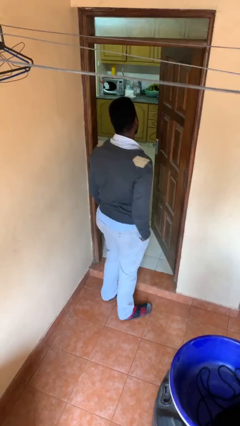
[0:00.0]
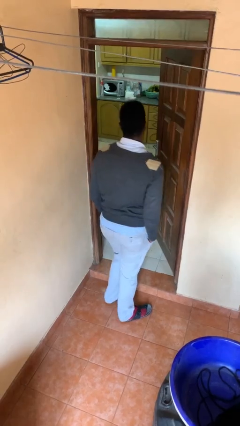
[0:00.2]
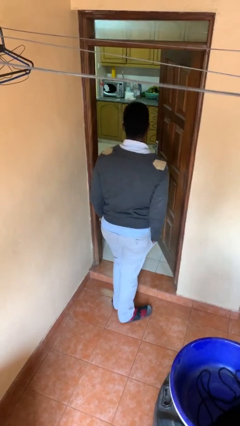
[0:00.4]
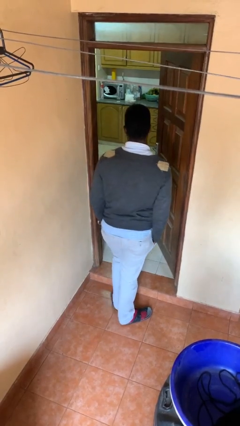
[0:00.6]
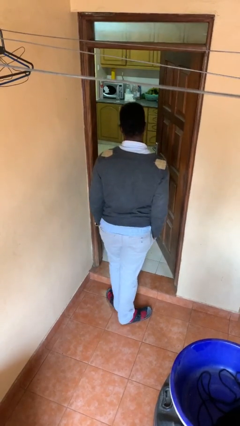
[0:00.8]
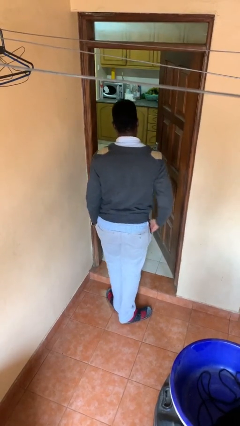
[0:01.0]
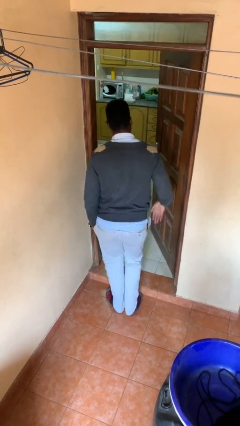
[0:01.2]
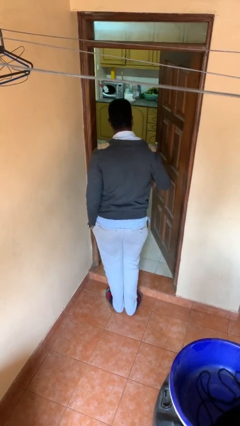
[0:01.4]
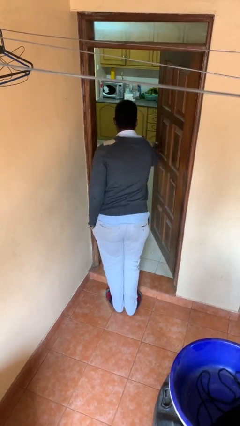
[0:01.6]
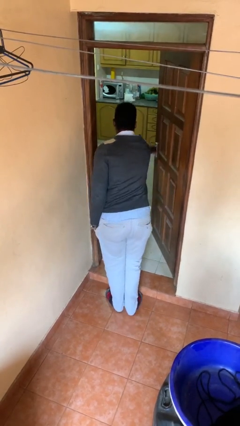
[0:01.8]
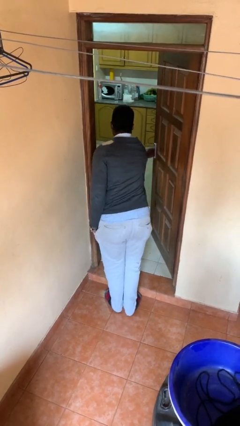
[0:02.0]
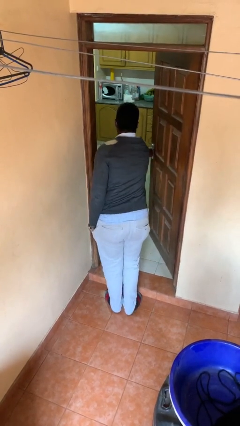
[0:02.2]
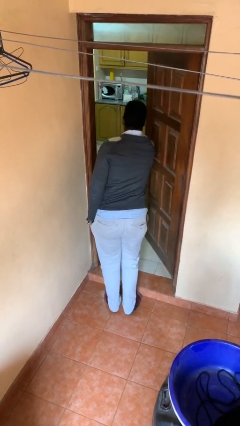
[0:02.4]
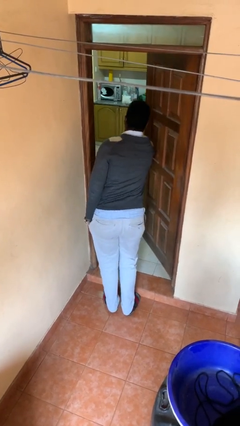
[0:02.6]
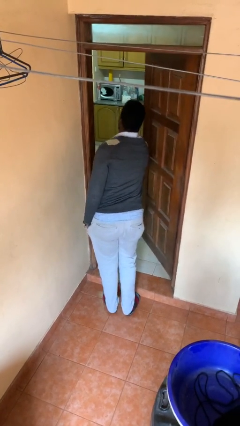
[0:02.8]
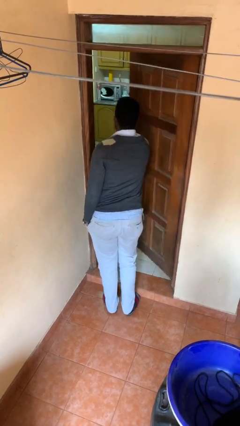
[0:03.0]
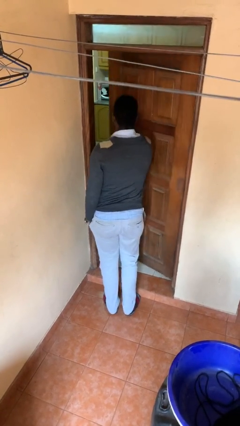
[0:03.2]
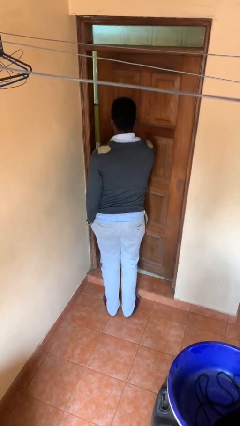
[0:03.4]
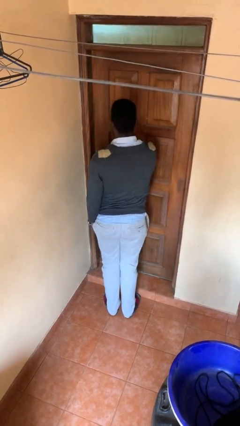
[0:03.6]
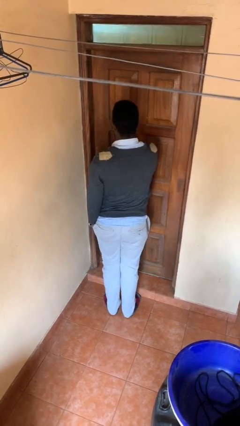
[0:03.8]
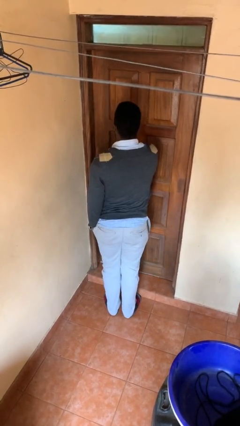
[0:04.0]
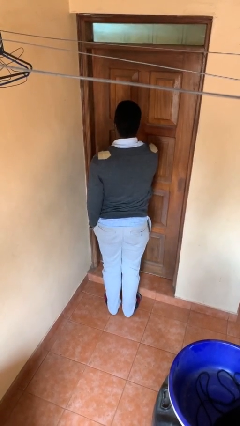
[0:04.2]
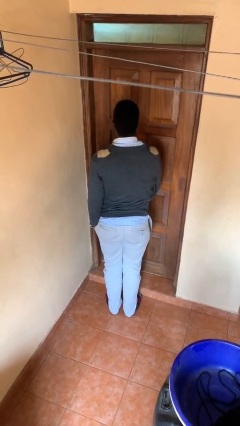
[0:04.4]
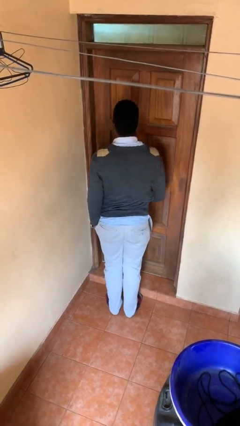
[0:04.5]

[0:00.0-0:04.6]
person closes facility door

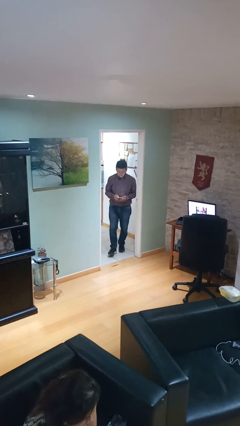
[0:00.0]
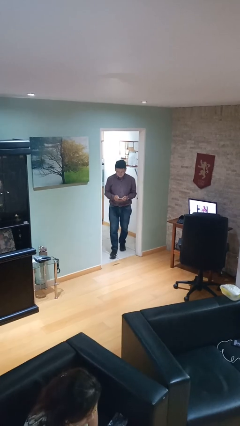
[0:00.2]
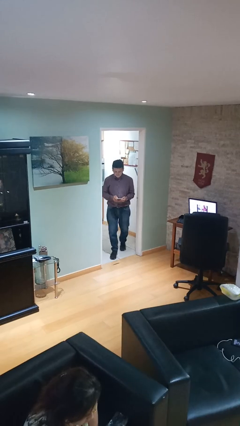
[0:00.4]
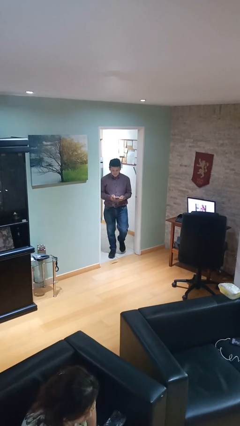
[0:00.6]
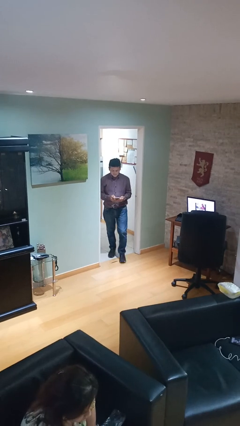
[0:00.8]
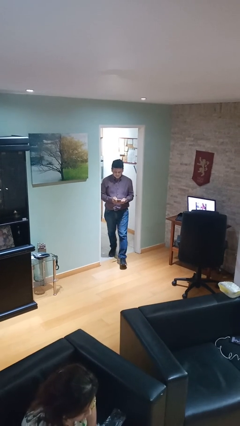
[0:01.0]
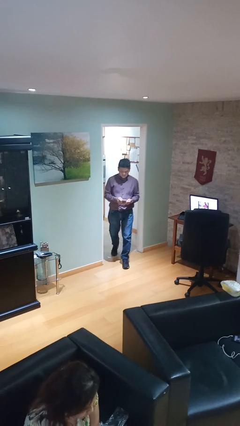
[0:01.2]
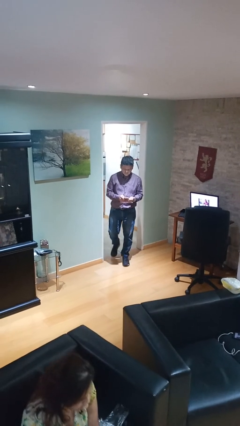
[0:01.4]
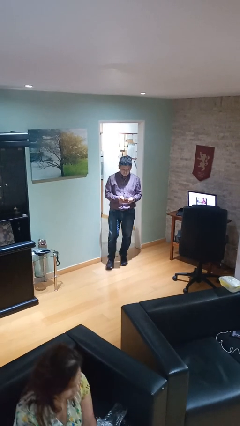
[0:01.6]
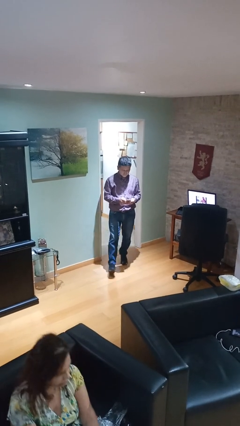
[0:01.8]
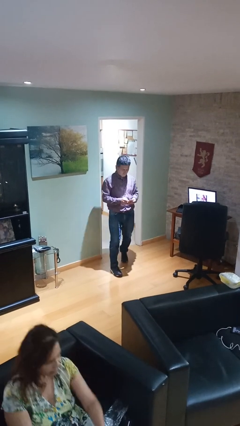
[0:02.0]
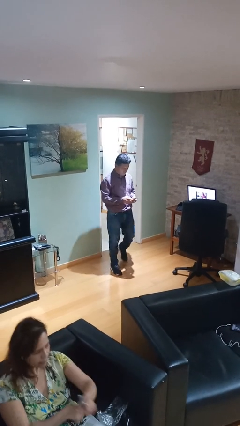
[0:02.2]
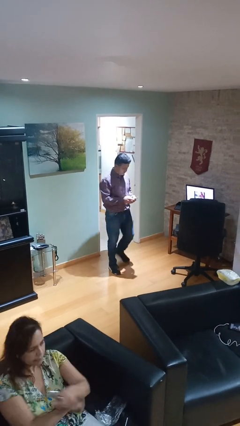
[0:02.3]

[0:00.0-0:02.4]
person enters scene through structure

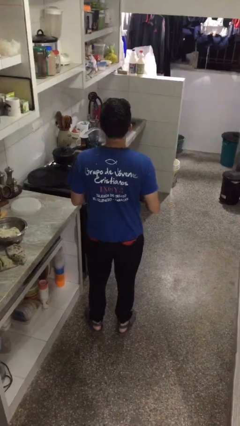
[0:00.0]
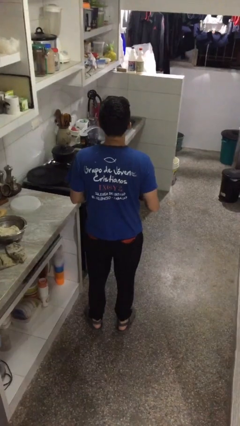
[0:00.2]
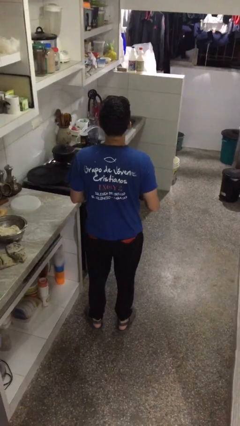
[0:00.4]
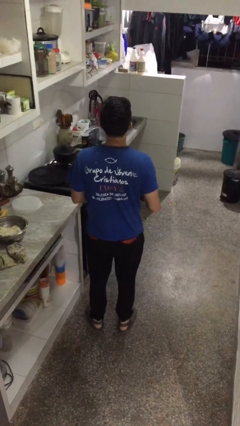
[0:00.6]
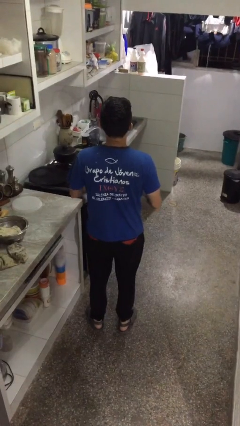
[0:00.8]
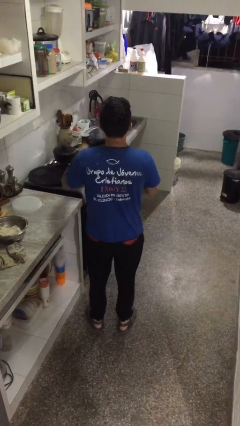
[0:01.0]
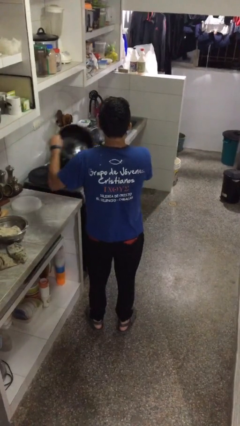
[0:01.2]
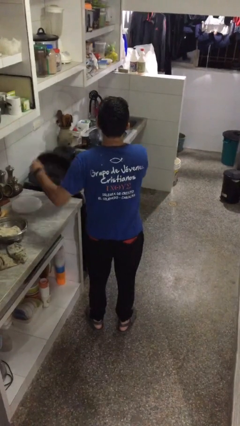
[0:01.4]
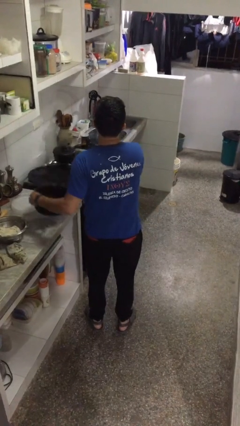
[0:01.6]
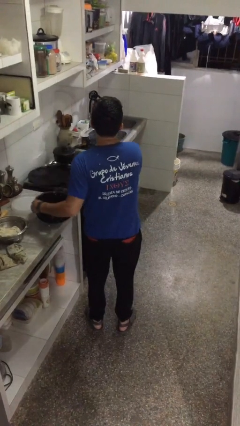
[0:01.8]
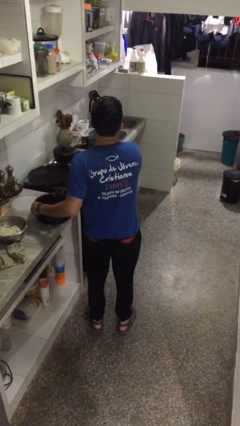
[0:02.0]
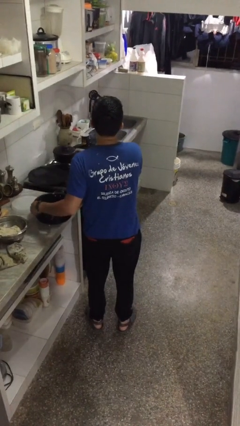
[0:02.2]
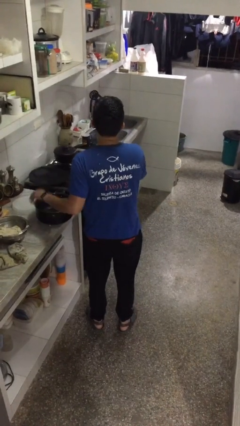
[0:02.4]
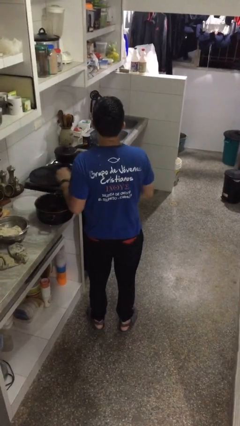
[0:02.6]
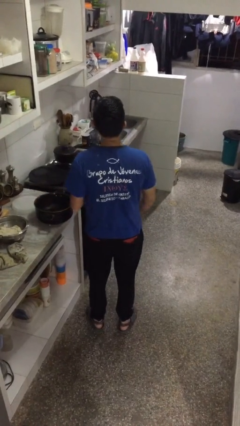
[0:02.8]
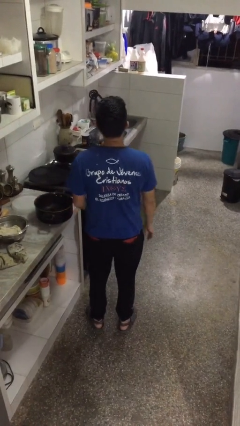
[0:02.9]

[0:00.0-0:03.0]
person puts down object on countertop

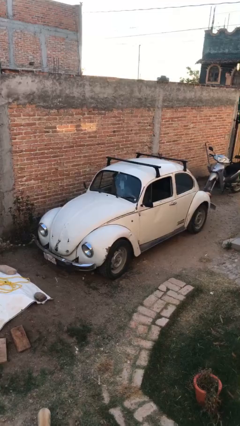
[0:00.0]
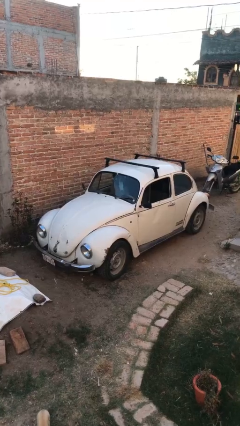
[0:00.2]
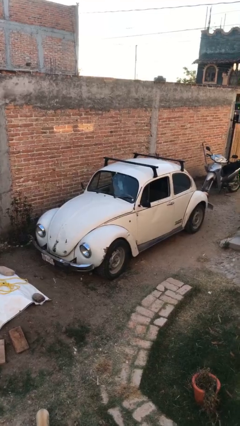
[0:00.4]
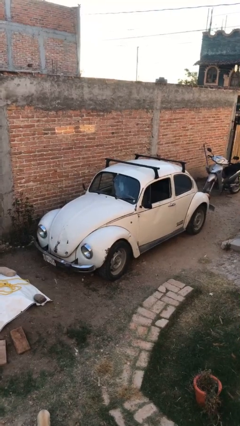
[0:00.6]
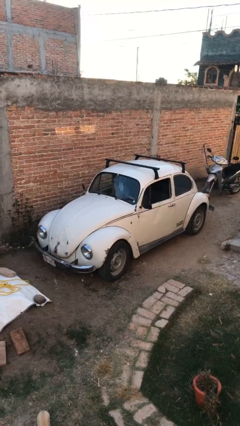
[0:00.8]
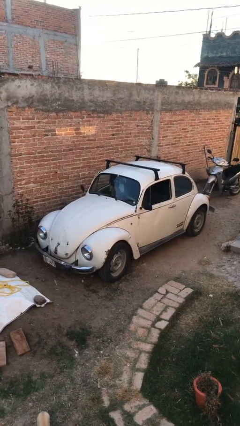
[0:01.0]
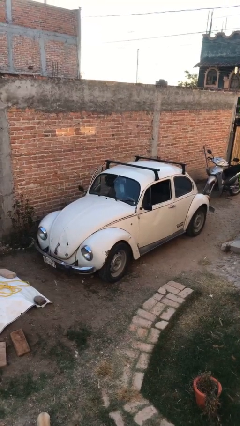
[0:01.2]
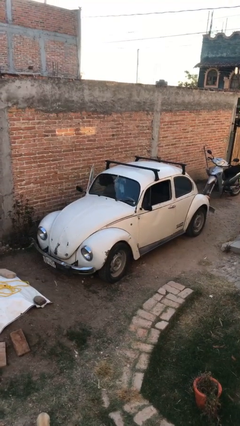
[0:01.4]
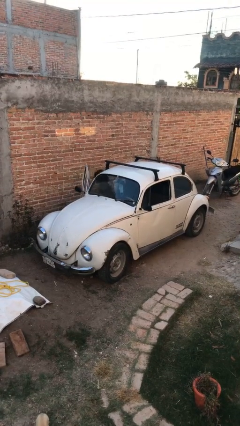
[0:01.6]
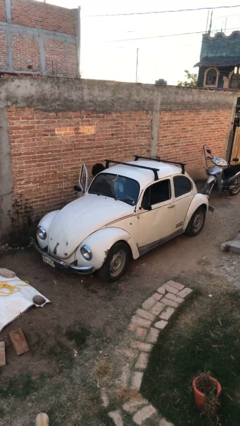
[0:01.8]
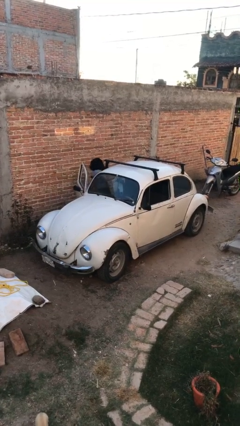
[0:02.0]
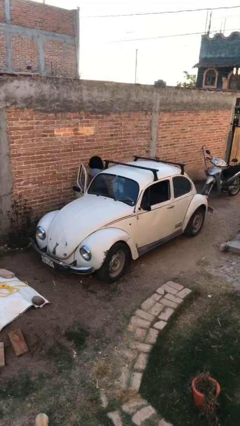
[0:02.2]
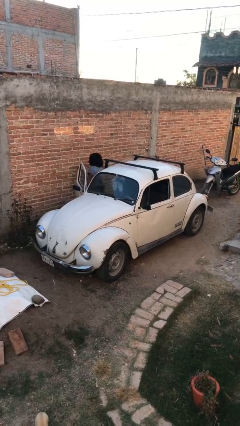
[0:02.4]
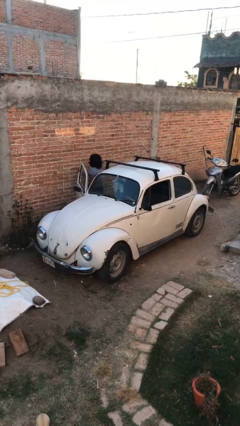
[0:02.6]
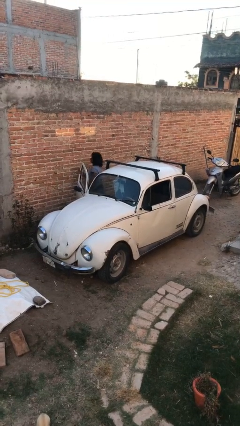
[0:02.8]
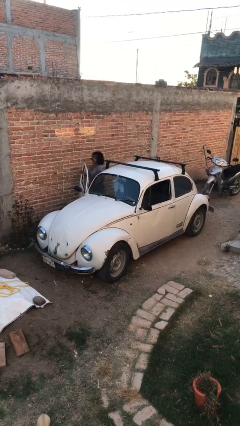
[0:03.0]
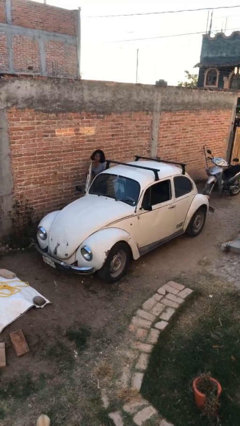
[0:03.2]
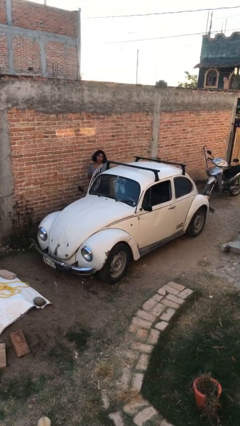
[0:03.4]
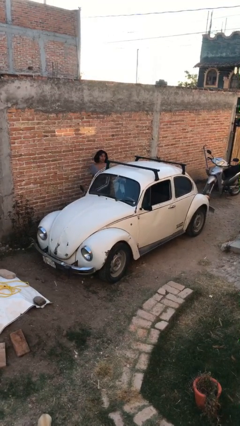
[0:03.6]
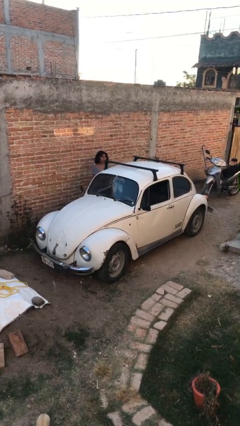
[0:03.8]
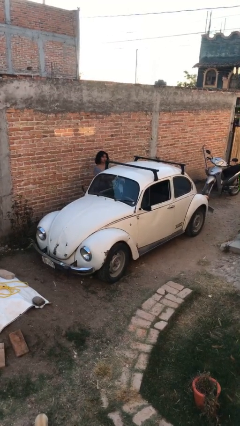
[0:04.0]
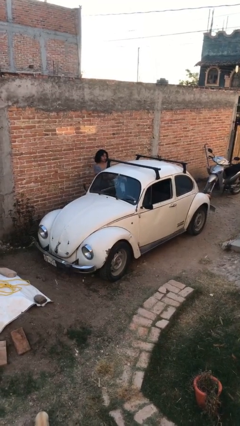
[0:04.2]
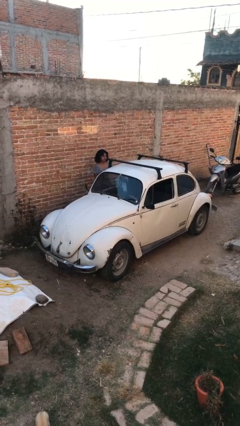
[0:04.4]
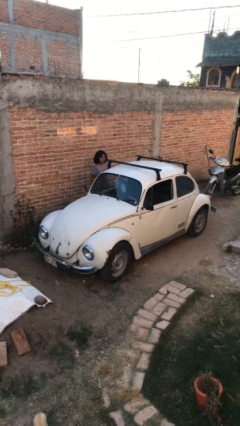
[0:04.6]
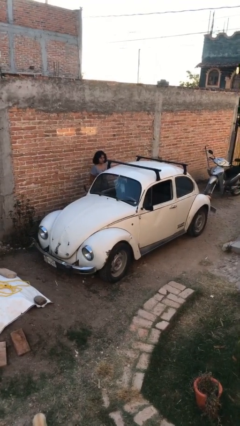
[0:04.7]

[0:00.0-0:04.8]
car drops off person

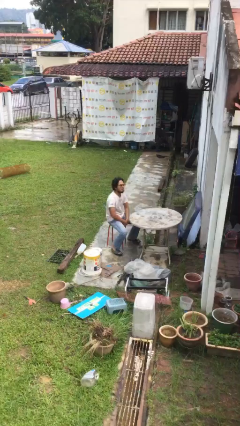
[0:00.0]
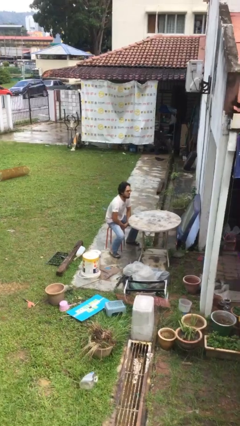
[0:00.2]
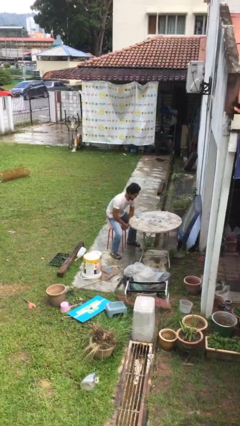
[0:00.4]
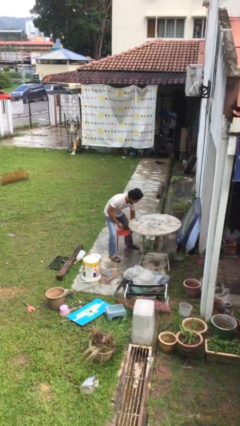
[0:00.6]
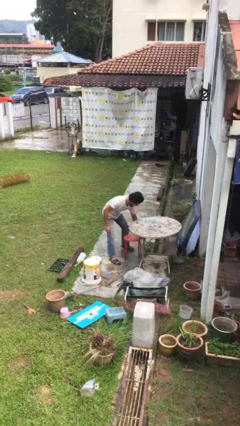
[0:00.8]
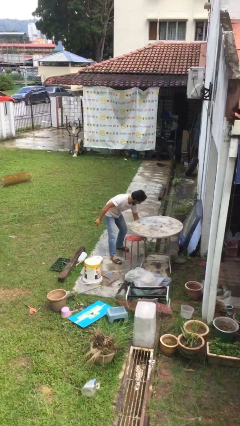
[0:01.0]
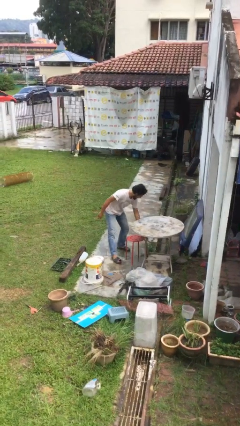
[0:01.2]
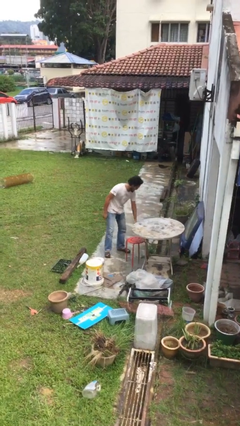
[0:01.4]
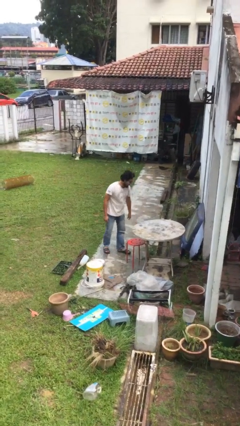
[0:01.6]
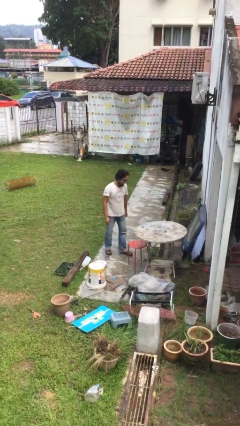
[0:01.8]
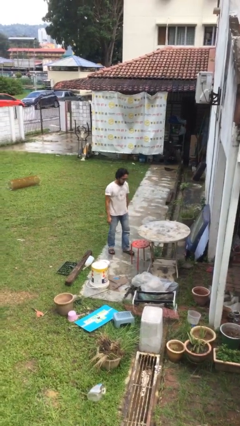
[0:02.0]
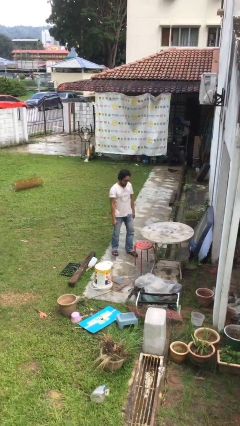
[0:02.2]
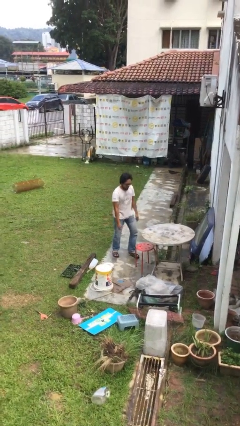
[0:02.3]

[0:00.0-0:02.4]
person stands up
